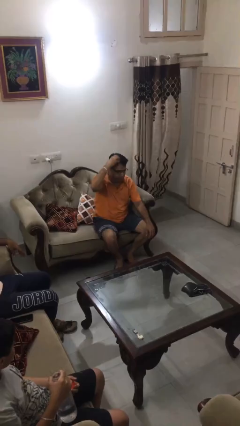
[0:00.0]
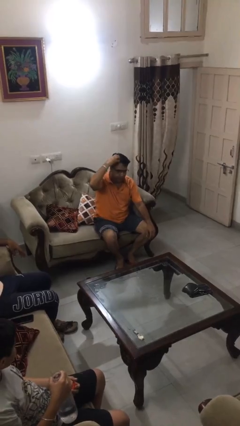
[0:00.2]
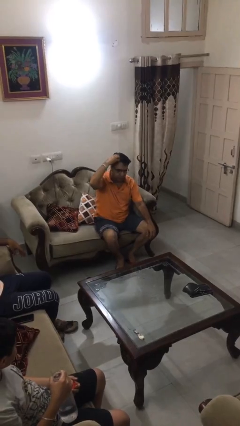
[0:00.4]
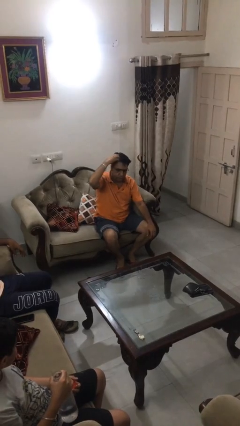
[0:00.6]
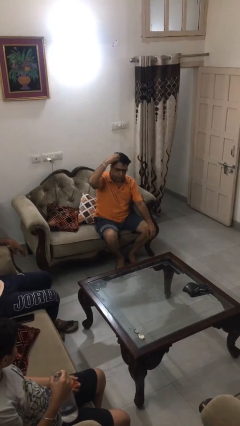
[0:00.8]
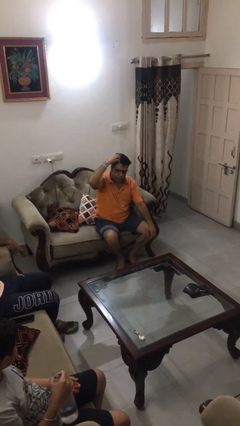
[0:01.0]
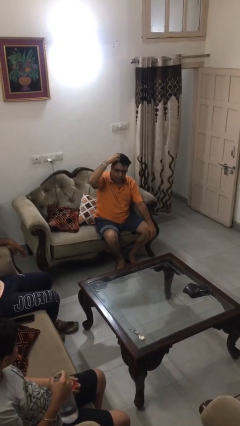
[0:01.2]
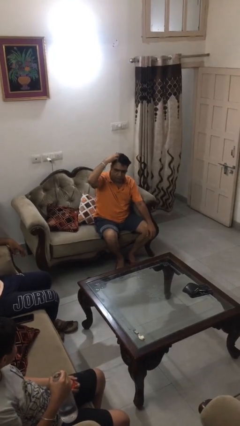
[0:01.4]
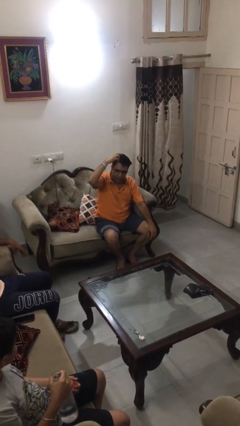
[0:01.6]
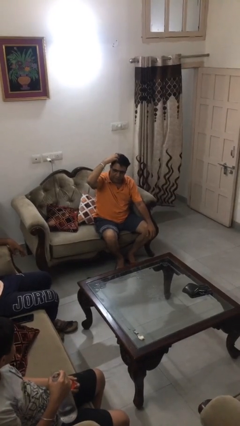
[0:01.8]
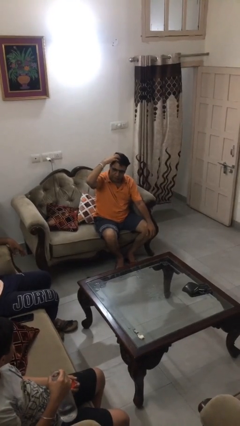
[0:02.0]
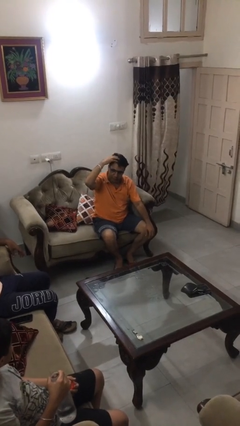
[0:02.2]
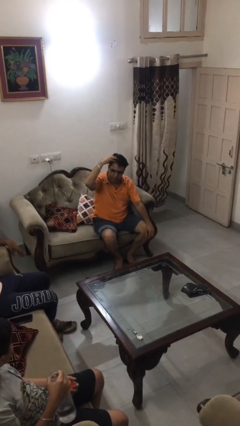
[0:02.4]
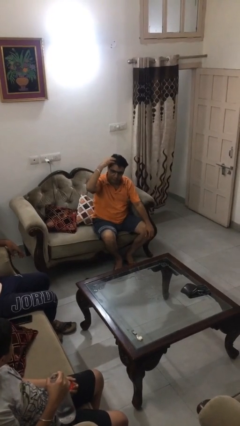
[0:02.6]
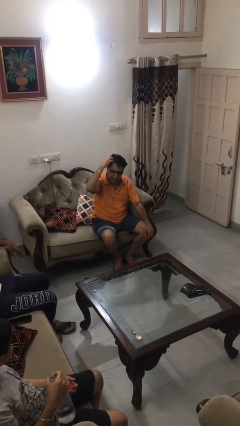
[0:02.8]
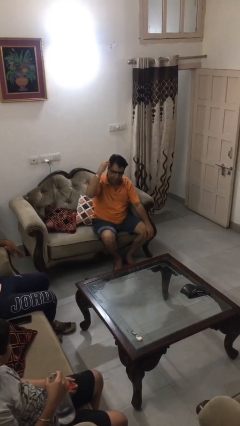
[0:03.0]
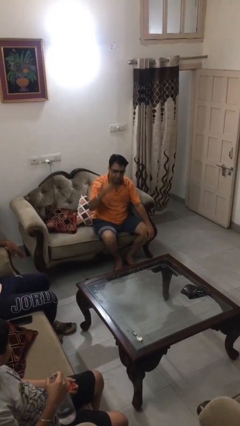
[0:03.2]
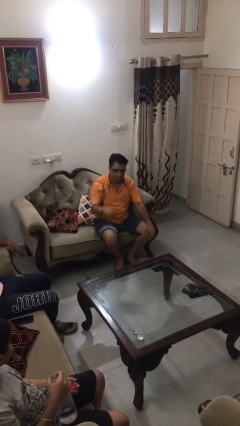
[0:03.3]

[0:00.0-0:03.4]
person scratches face

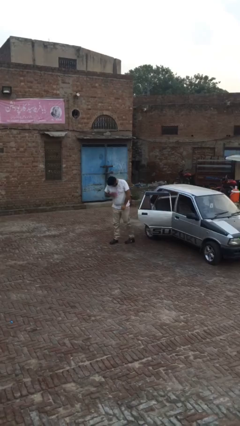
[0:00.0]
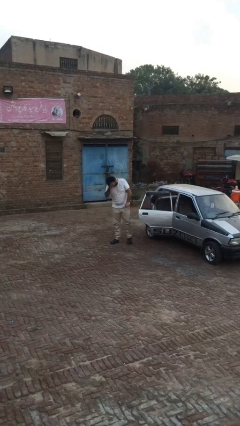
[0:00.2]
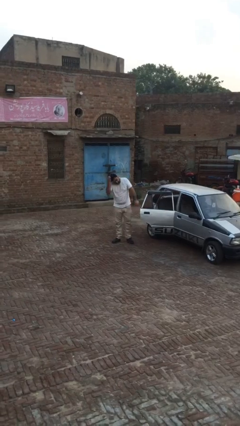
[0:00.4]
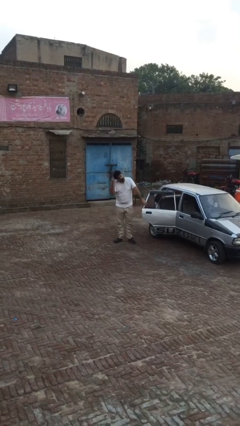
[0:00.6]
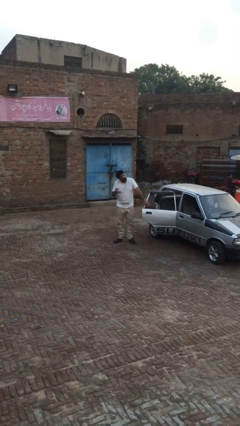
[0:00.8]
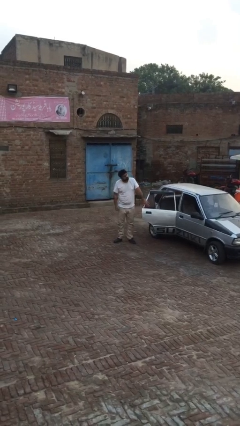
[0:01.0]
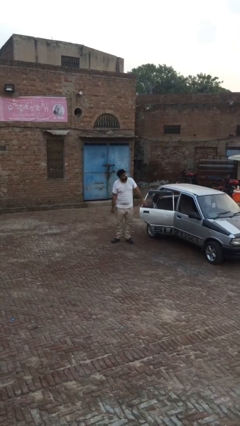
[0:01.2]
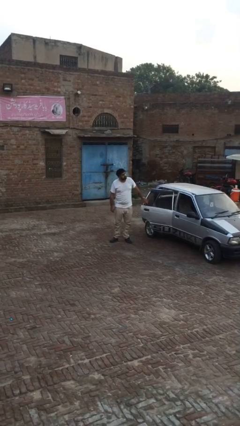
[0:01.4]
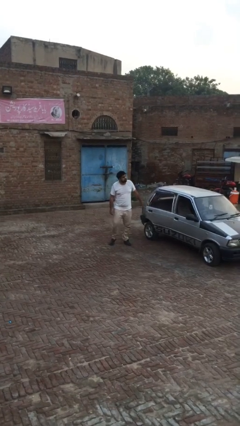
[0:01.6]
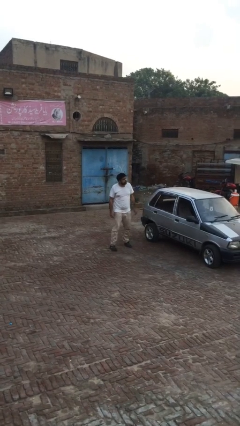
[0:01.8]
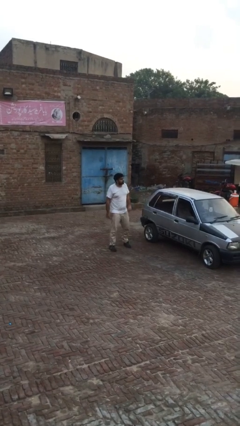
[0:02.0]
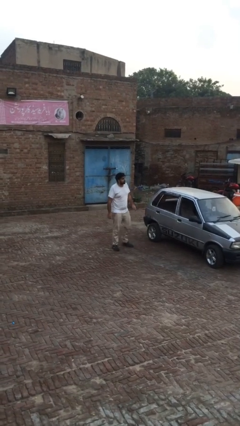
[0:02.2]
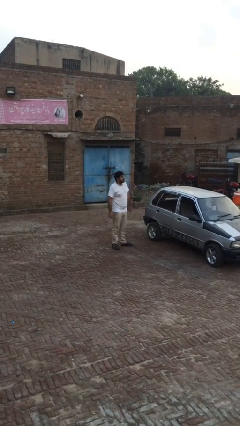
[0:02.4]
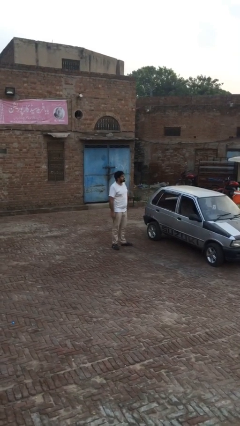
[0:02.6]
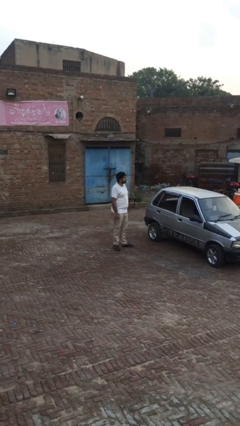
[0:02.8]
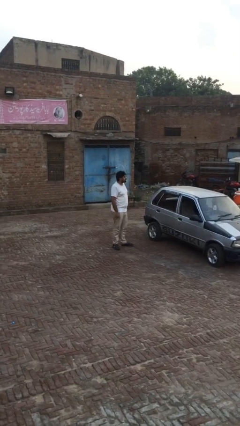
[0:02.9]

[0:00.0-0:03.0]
person closes car door

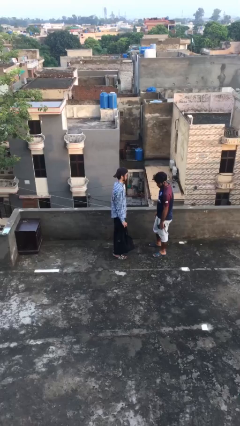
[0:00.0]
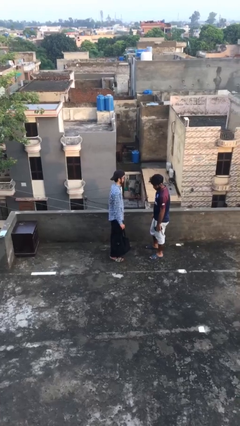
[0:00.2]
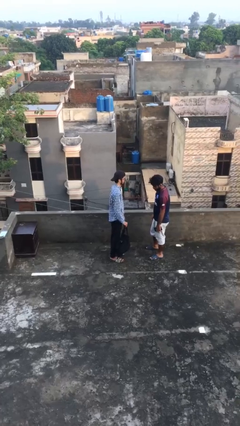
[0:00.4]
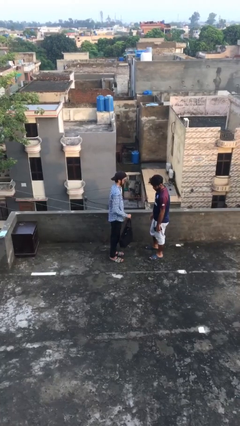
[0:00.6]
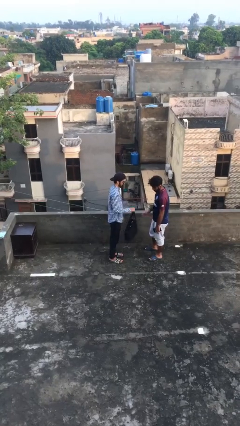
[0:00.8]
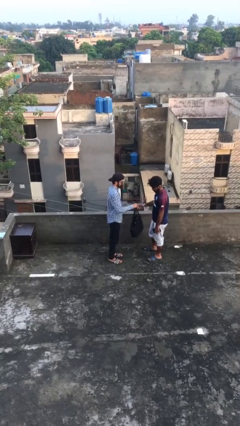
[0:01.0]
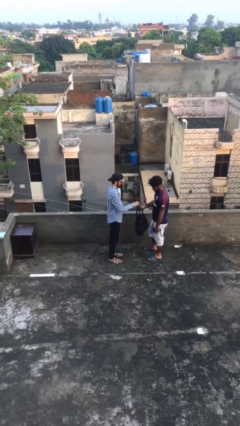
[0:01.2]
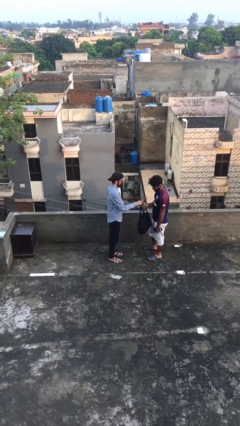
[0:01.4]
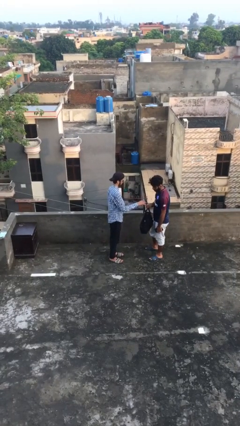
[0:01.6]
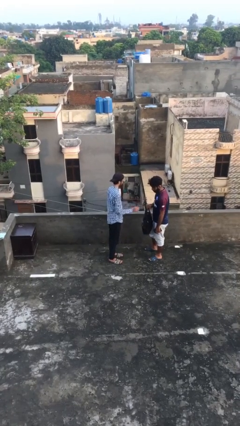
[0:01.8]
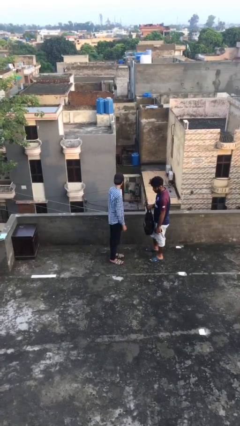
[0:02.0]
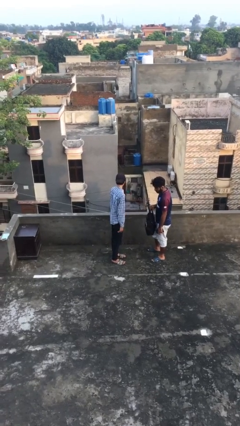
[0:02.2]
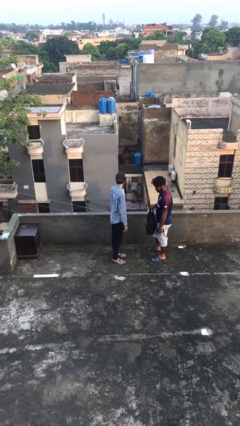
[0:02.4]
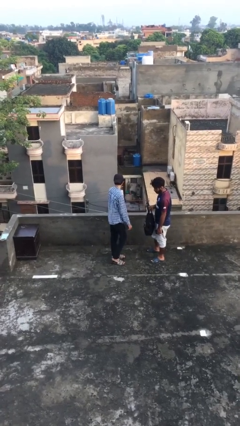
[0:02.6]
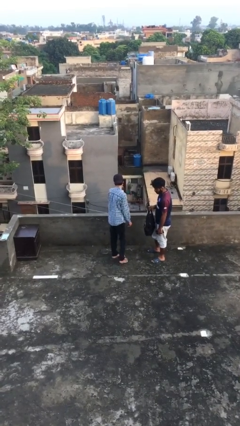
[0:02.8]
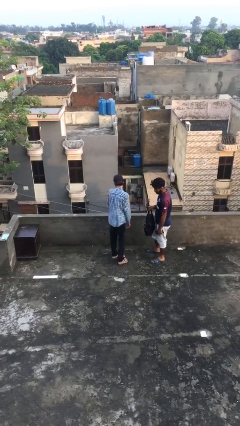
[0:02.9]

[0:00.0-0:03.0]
person transfers object to person

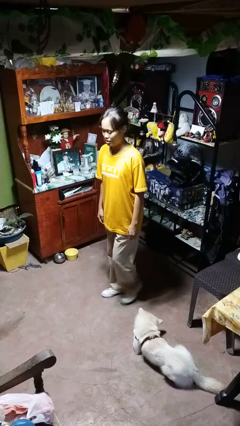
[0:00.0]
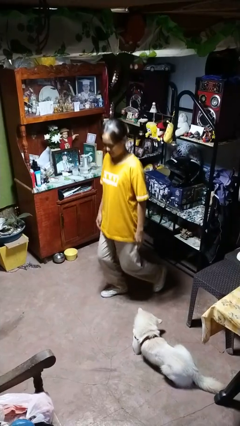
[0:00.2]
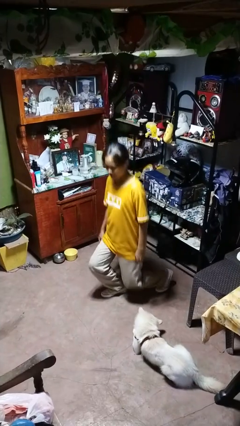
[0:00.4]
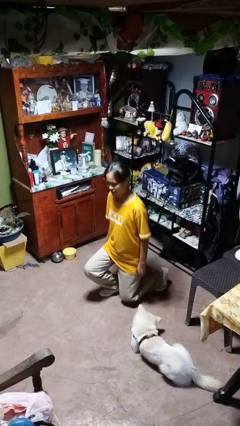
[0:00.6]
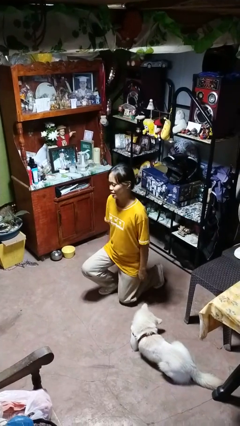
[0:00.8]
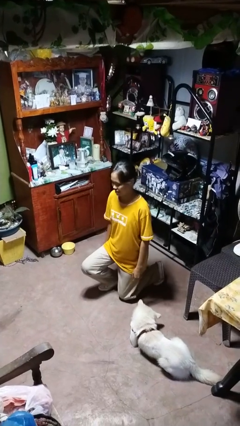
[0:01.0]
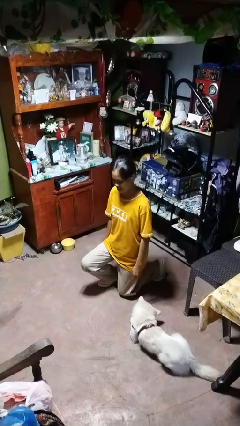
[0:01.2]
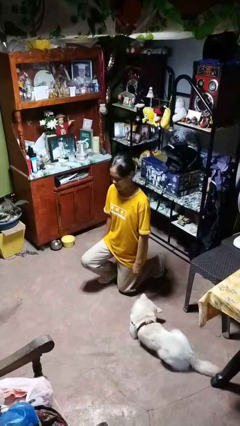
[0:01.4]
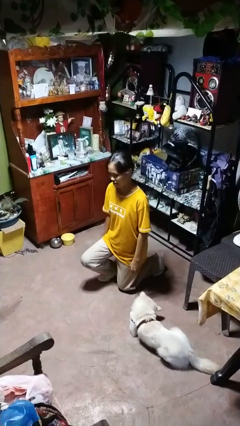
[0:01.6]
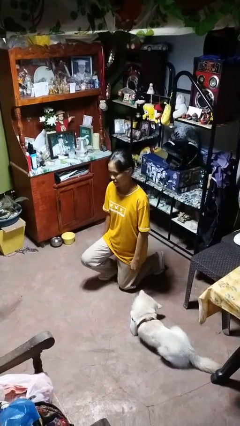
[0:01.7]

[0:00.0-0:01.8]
person kneels

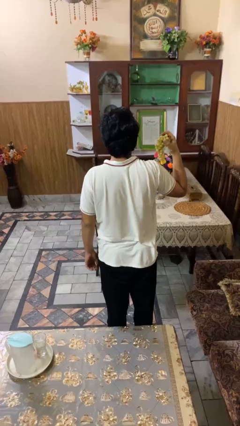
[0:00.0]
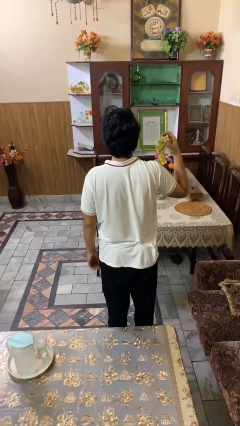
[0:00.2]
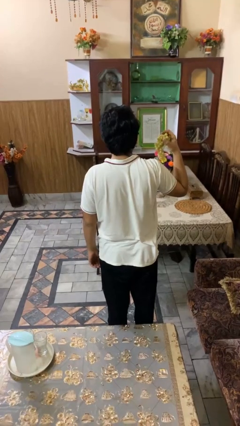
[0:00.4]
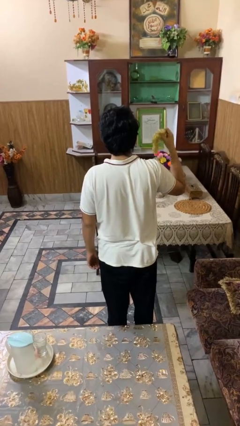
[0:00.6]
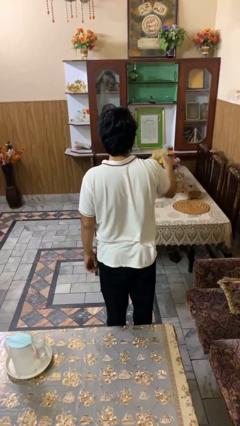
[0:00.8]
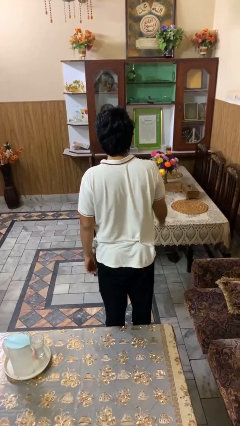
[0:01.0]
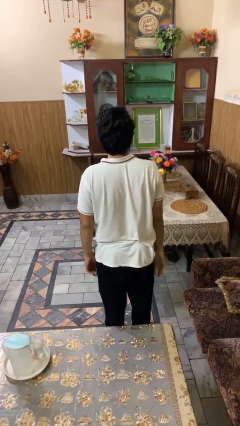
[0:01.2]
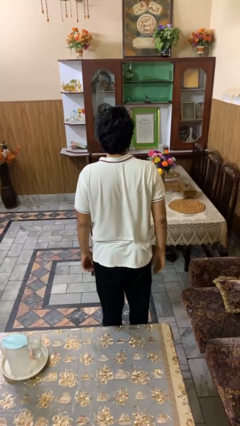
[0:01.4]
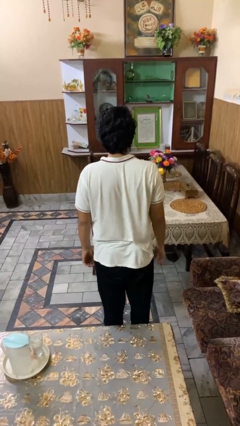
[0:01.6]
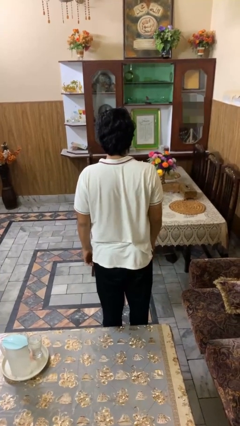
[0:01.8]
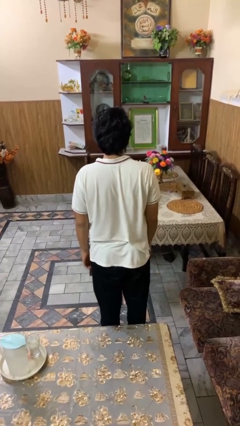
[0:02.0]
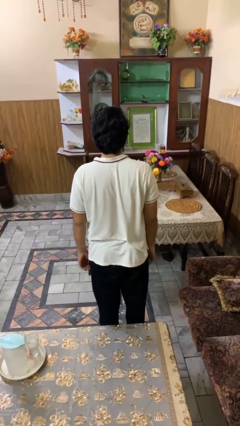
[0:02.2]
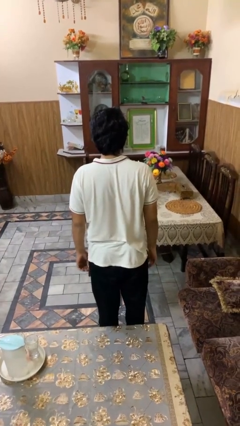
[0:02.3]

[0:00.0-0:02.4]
person throws object on table

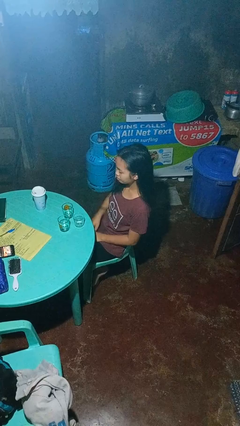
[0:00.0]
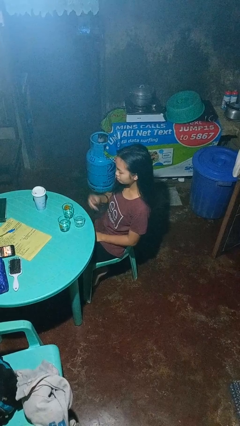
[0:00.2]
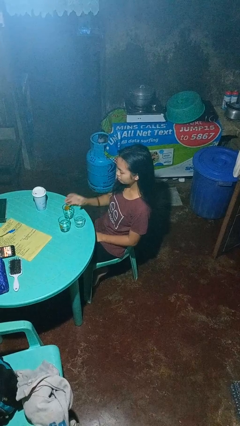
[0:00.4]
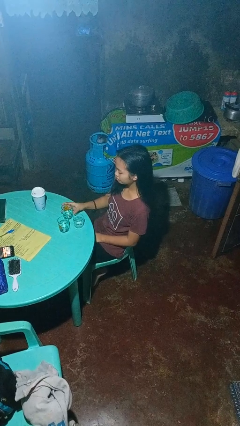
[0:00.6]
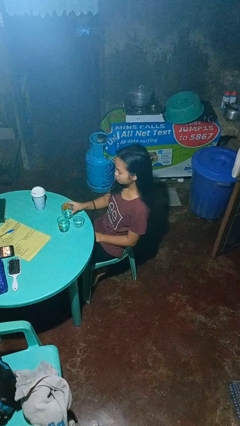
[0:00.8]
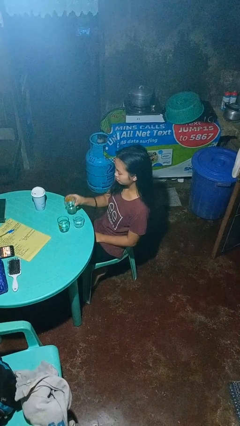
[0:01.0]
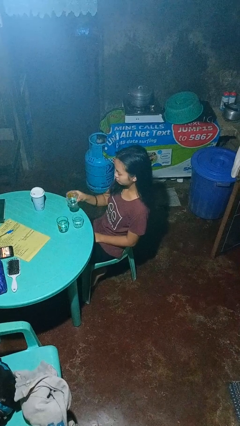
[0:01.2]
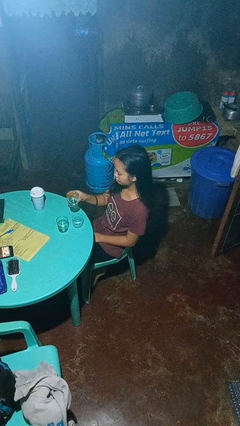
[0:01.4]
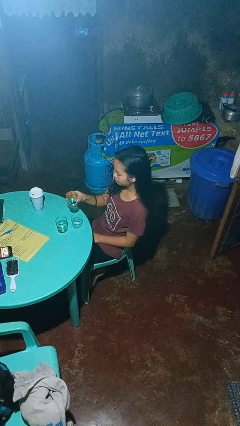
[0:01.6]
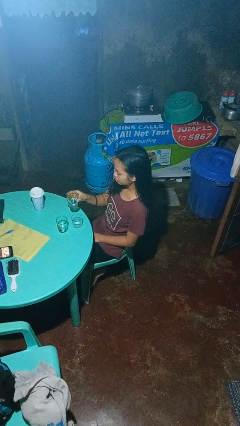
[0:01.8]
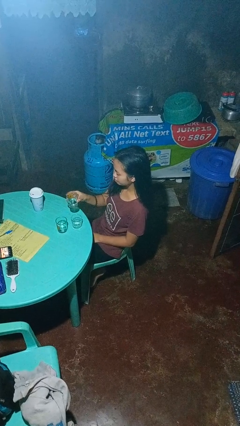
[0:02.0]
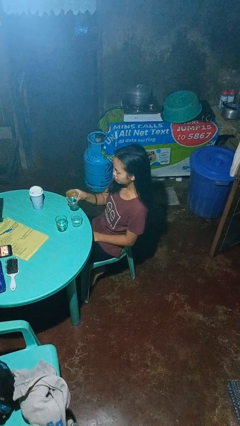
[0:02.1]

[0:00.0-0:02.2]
person picks up object from table

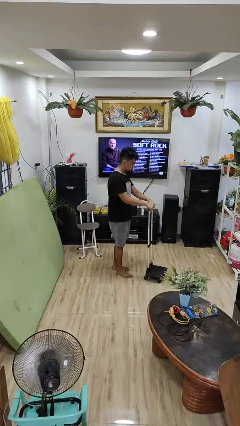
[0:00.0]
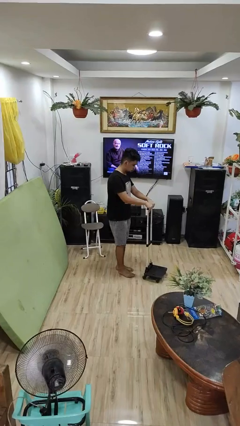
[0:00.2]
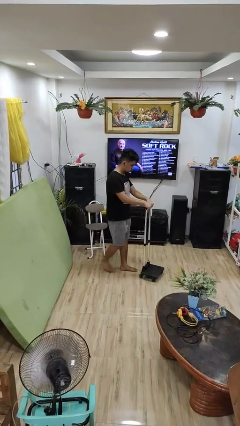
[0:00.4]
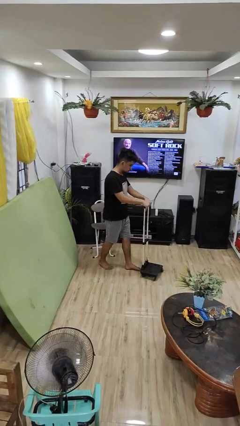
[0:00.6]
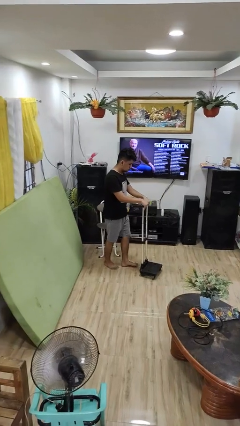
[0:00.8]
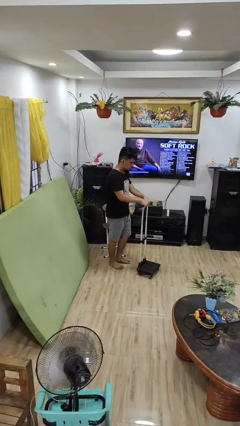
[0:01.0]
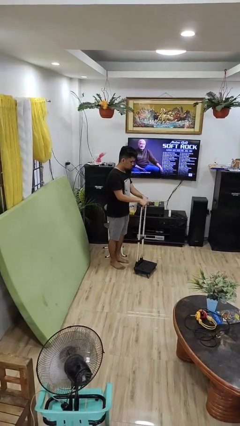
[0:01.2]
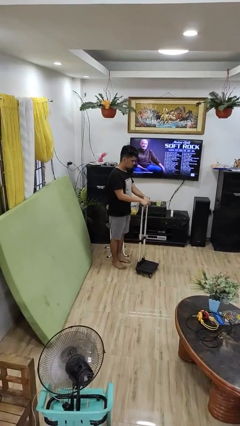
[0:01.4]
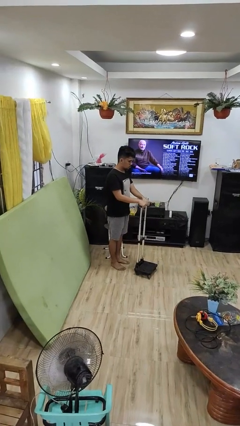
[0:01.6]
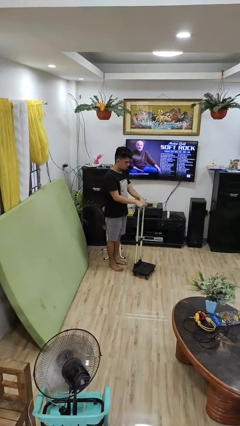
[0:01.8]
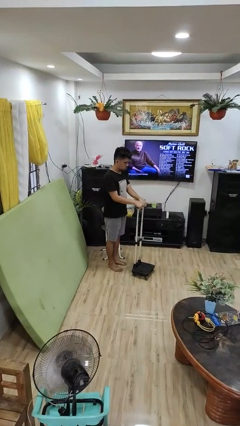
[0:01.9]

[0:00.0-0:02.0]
person pulls wheeled cart
